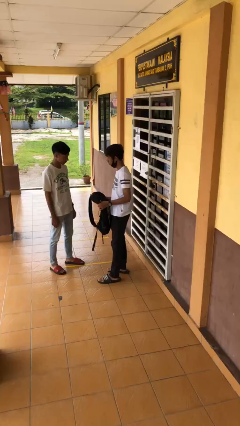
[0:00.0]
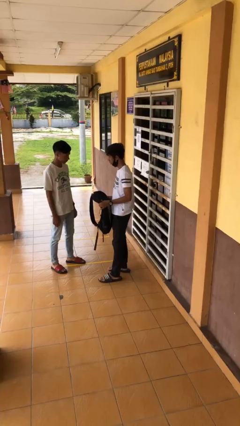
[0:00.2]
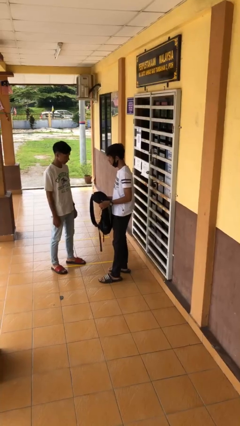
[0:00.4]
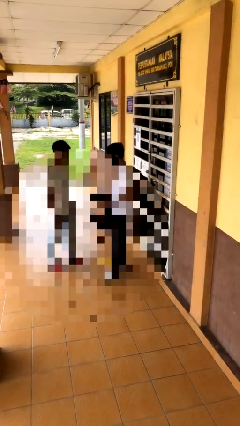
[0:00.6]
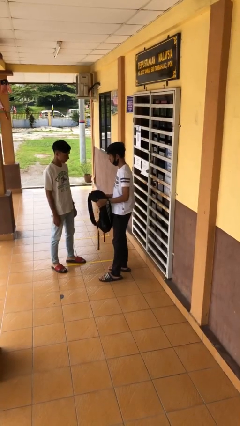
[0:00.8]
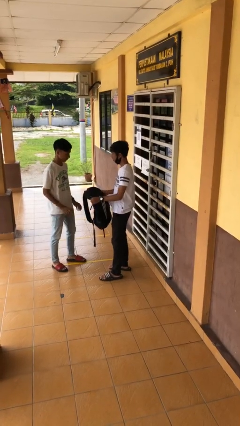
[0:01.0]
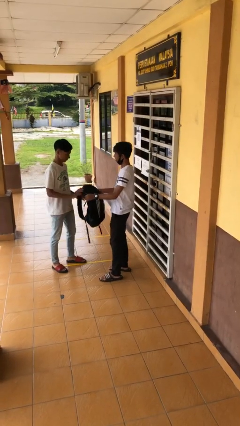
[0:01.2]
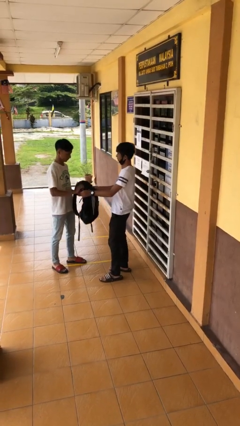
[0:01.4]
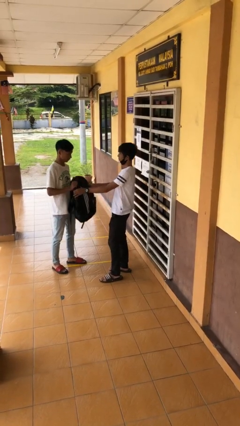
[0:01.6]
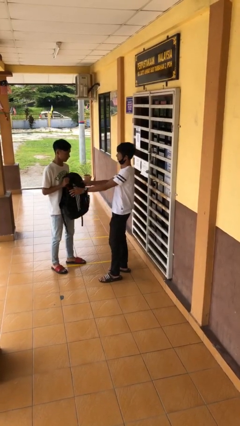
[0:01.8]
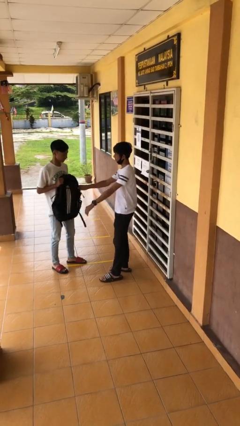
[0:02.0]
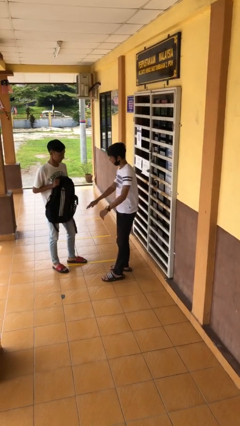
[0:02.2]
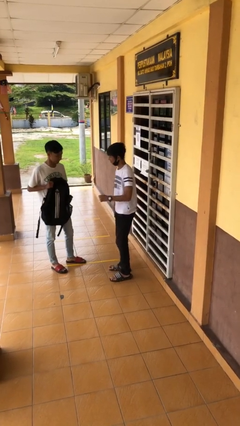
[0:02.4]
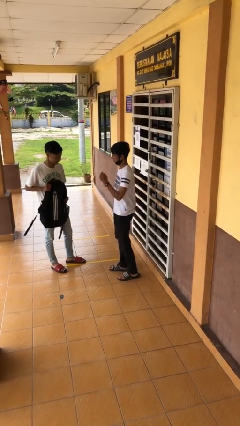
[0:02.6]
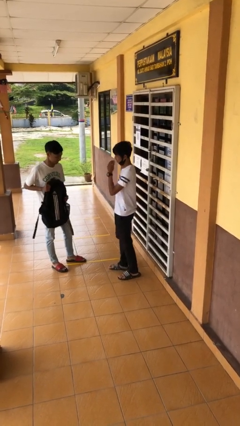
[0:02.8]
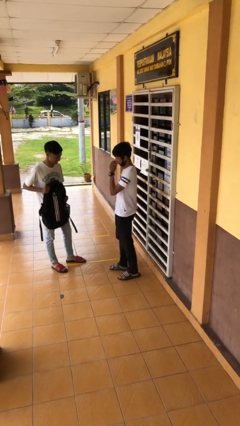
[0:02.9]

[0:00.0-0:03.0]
person transfers object to person

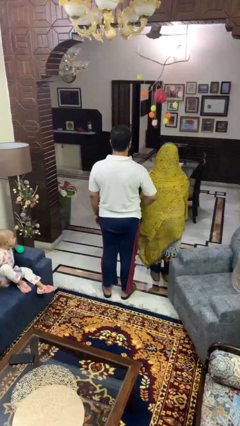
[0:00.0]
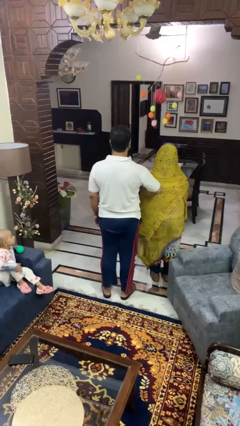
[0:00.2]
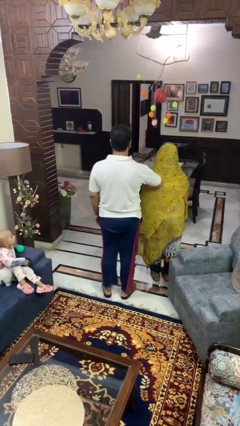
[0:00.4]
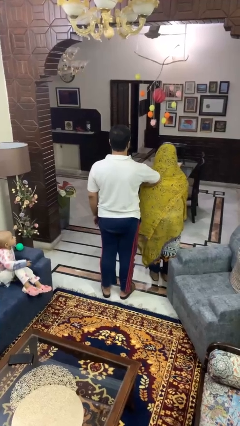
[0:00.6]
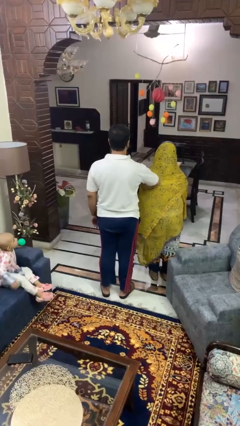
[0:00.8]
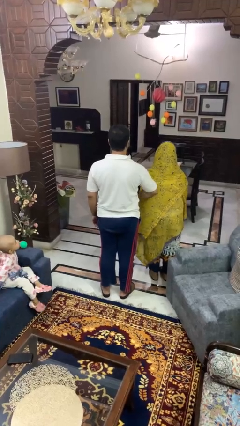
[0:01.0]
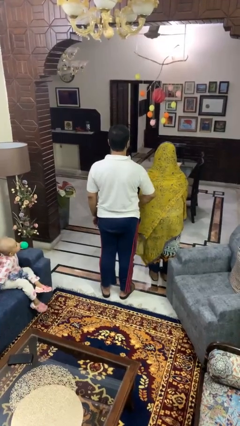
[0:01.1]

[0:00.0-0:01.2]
person nudges person with elbow

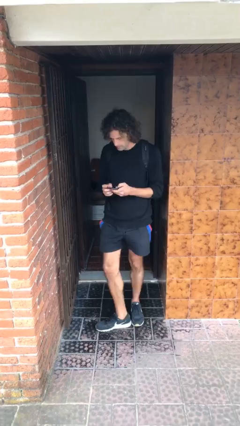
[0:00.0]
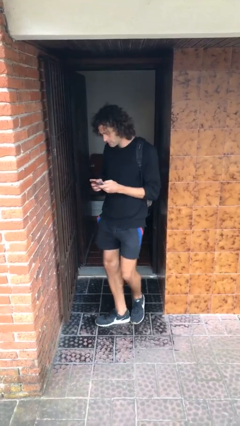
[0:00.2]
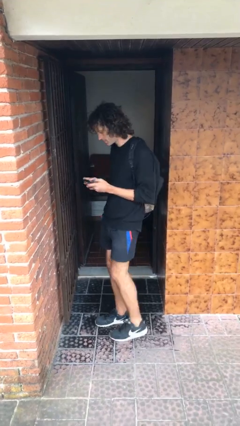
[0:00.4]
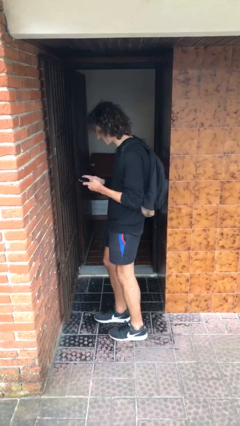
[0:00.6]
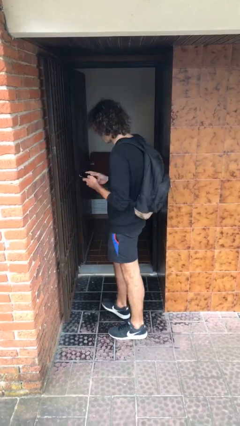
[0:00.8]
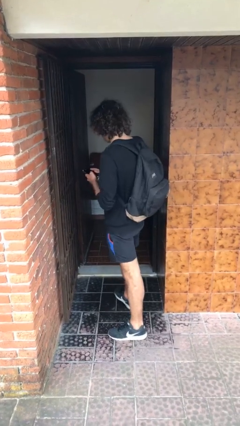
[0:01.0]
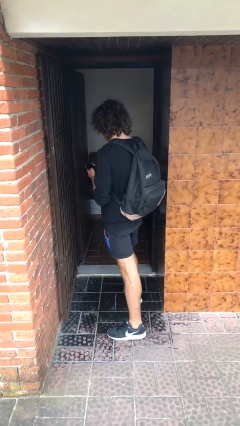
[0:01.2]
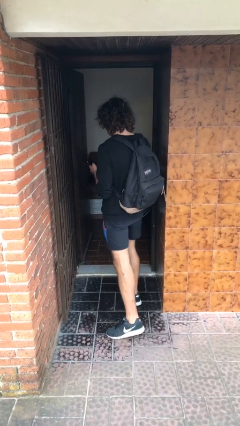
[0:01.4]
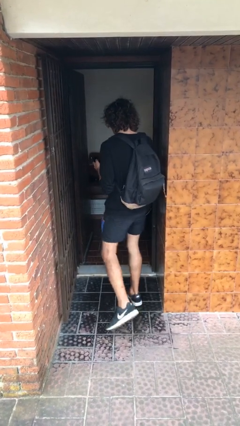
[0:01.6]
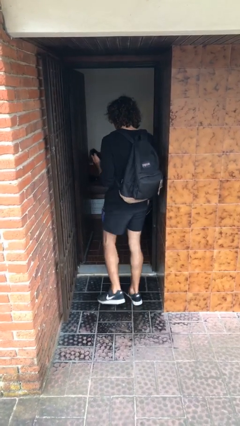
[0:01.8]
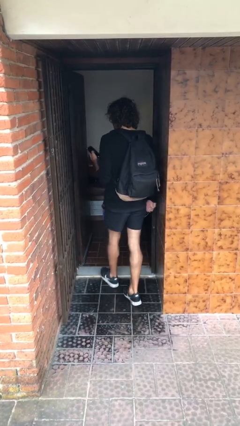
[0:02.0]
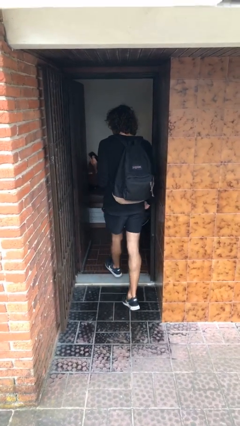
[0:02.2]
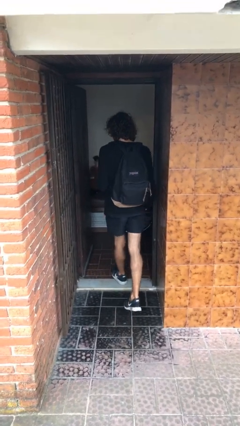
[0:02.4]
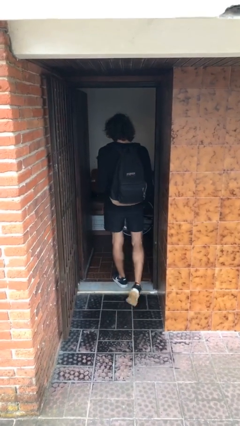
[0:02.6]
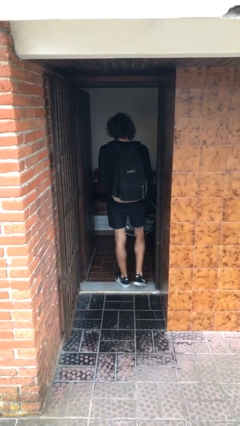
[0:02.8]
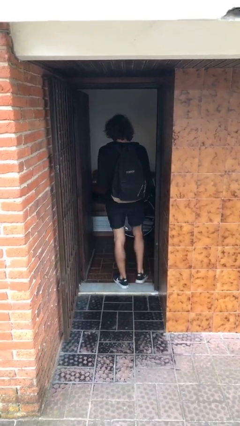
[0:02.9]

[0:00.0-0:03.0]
person exits scene through structure

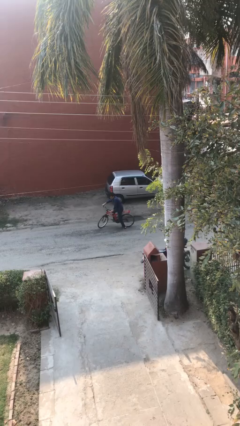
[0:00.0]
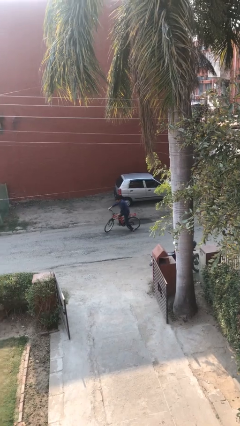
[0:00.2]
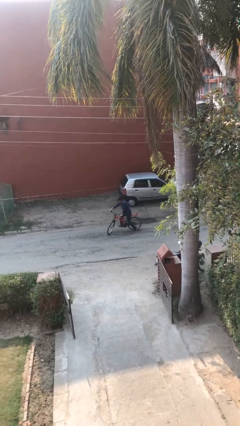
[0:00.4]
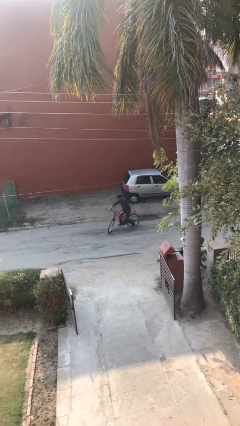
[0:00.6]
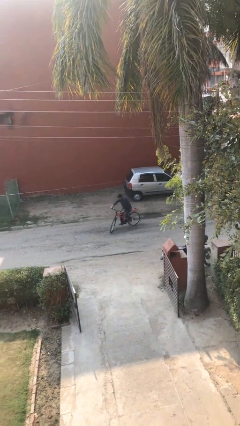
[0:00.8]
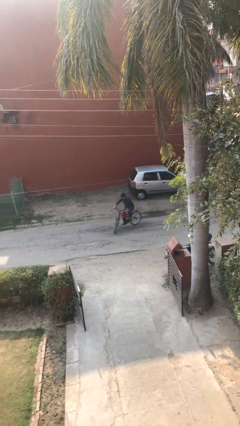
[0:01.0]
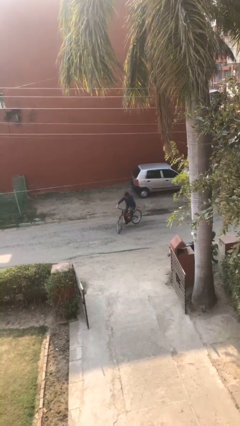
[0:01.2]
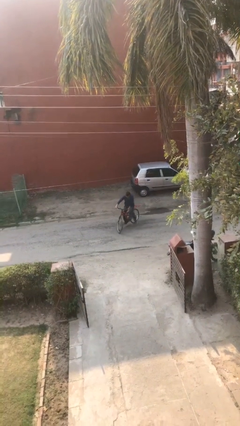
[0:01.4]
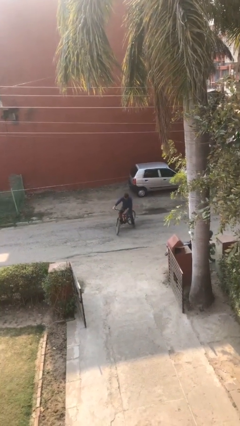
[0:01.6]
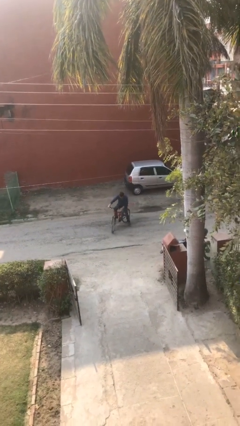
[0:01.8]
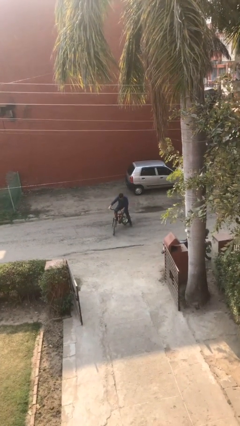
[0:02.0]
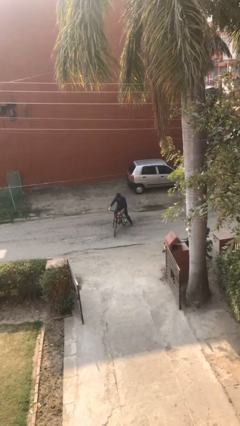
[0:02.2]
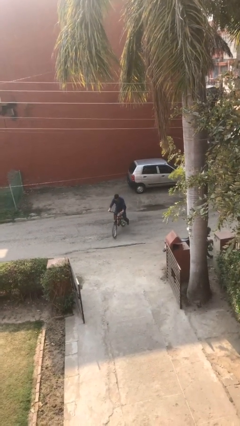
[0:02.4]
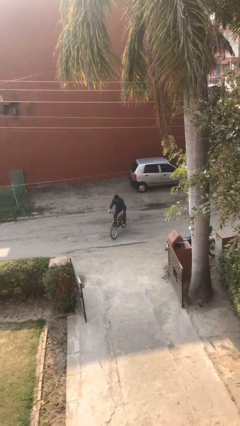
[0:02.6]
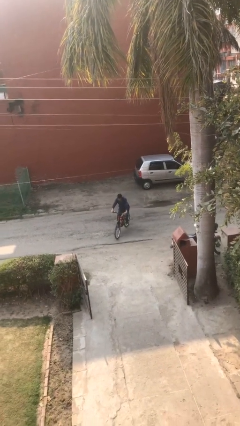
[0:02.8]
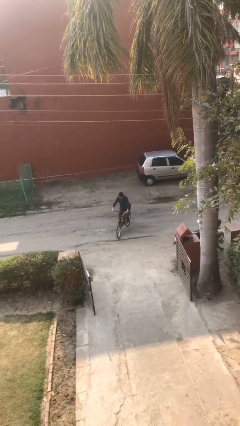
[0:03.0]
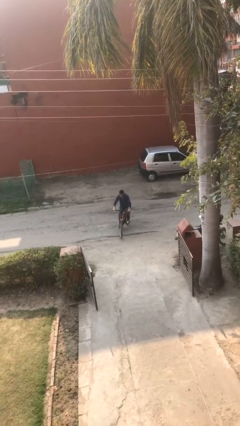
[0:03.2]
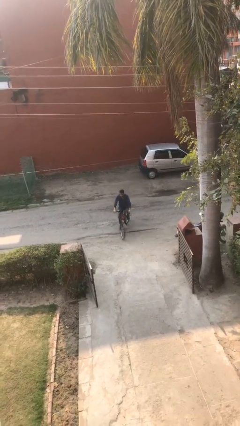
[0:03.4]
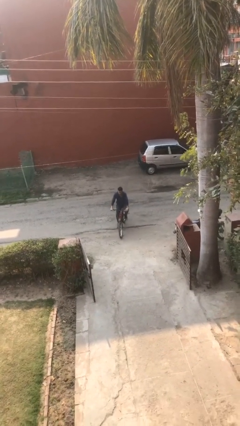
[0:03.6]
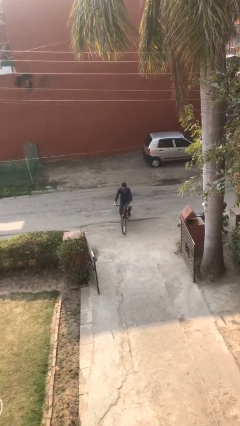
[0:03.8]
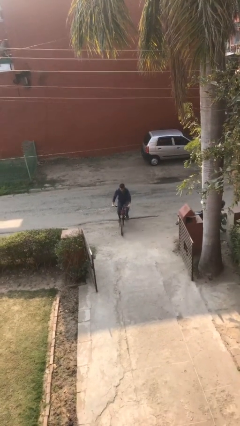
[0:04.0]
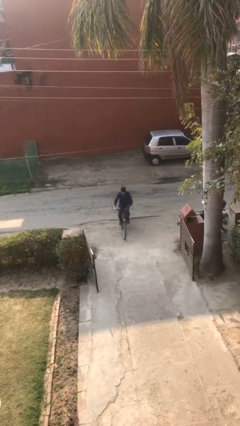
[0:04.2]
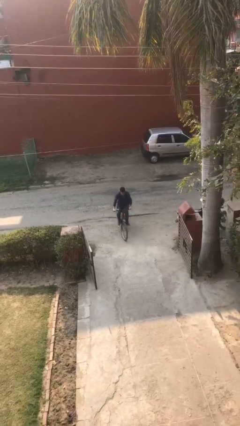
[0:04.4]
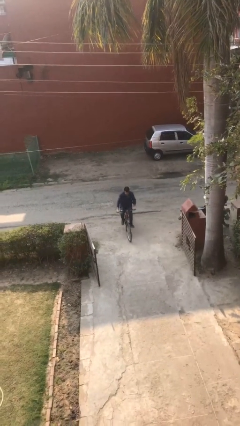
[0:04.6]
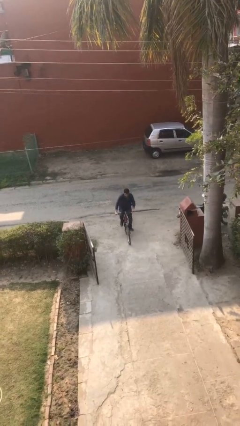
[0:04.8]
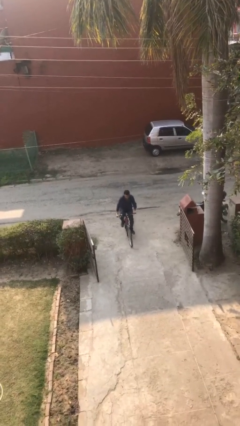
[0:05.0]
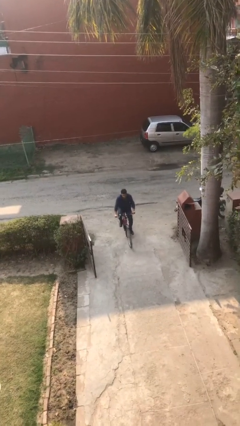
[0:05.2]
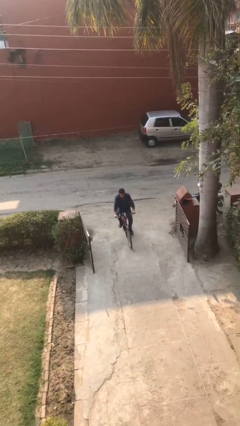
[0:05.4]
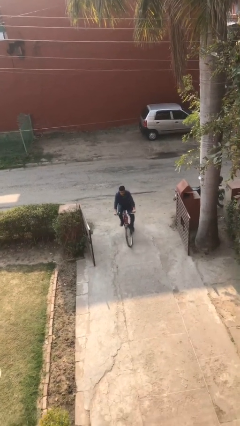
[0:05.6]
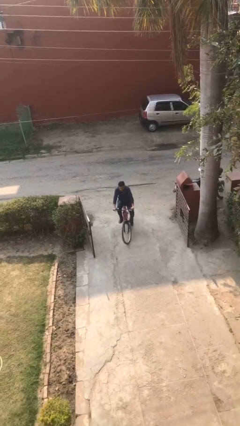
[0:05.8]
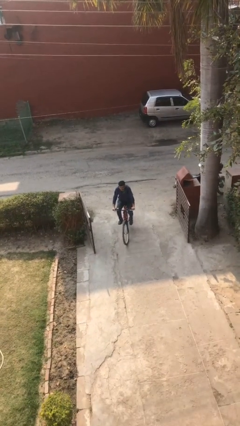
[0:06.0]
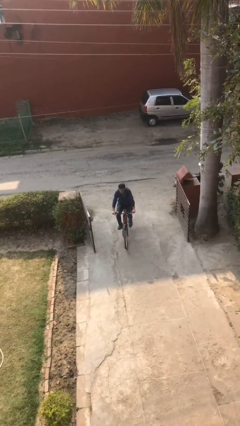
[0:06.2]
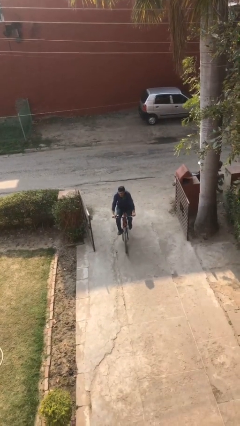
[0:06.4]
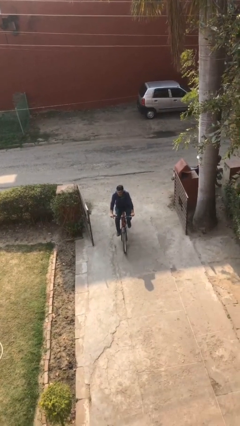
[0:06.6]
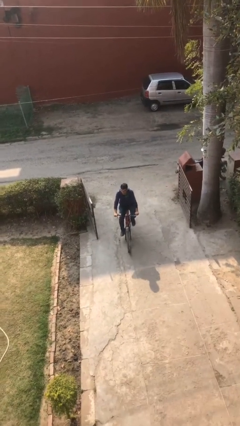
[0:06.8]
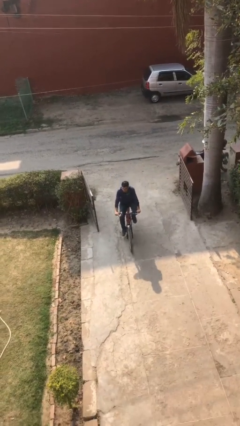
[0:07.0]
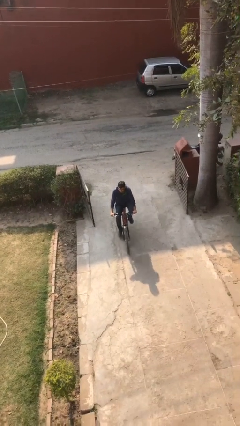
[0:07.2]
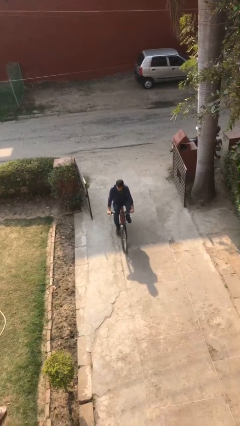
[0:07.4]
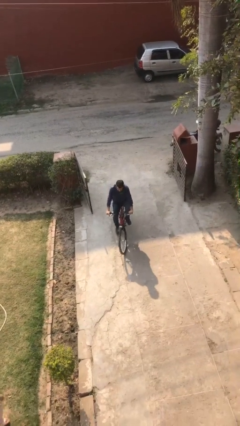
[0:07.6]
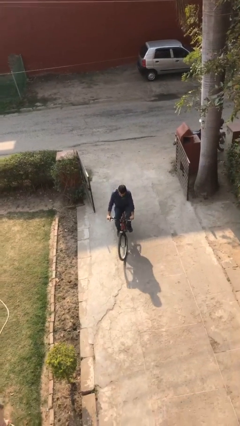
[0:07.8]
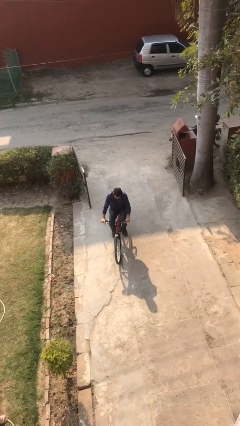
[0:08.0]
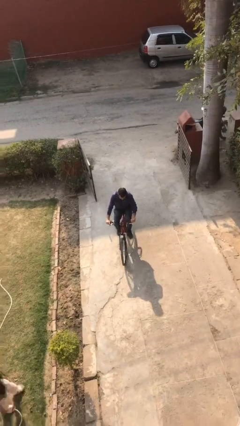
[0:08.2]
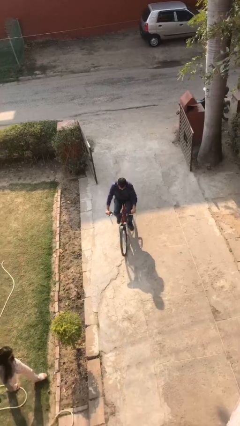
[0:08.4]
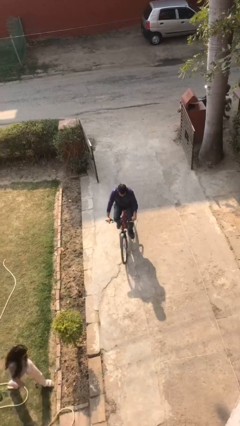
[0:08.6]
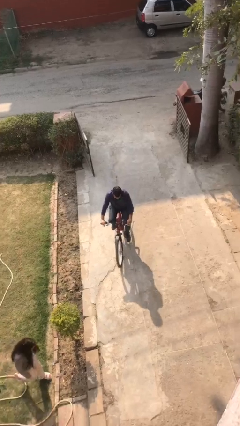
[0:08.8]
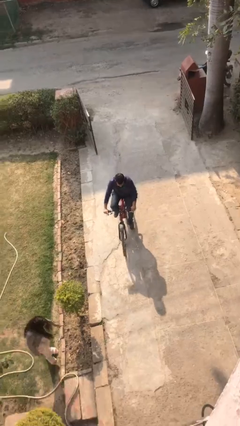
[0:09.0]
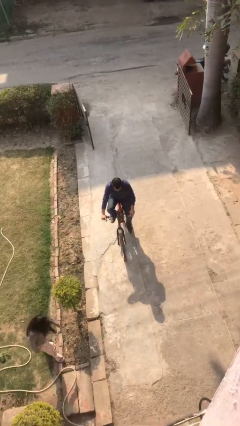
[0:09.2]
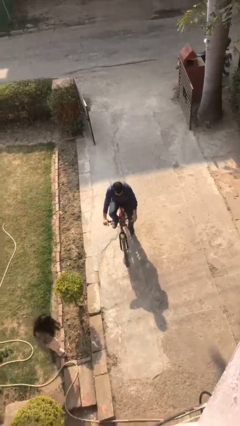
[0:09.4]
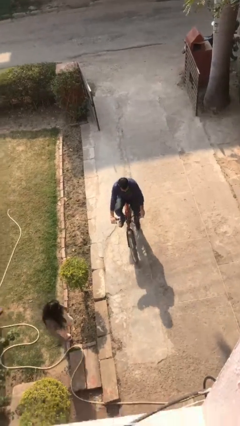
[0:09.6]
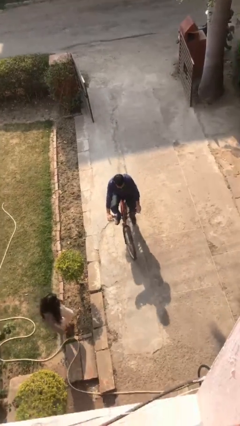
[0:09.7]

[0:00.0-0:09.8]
person rides bicycle

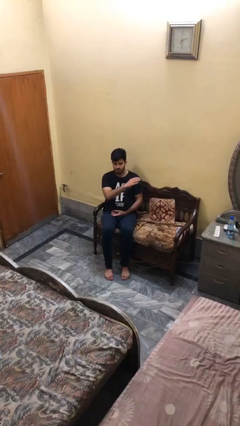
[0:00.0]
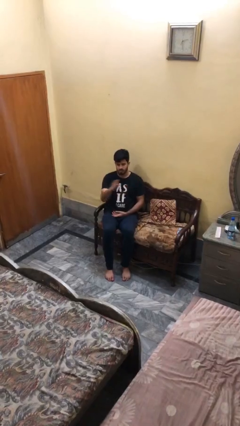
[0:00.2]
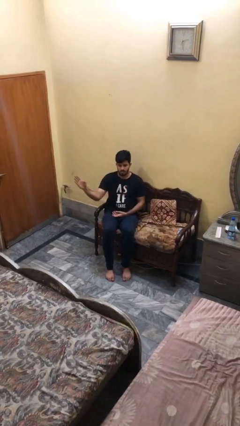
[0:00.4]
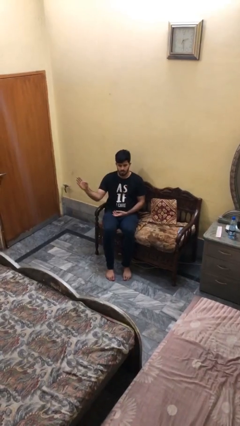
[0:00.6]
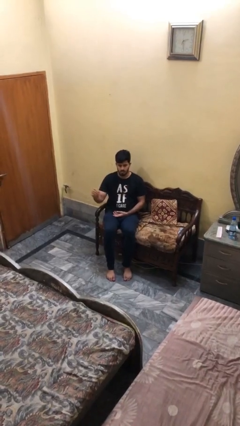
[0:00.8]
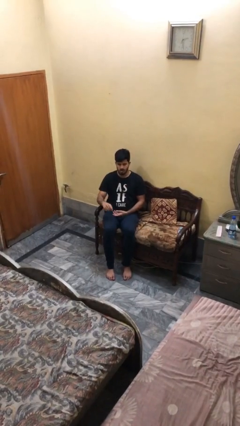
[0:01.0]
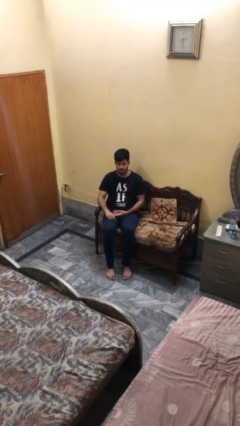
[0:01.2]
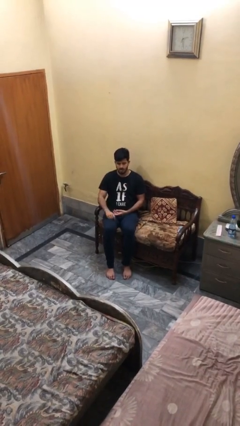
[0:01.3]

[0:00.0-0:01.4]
person gestures swipe right
